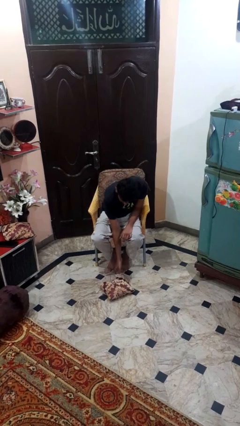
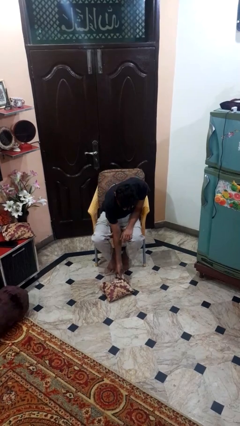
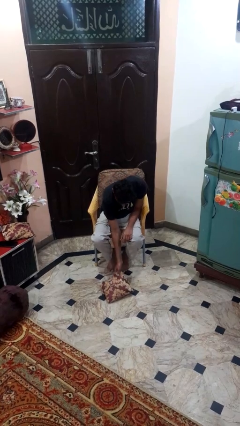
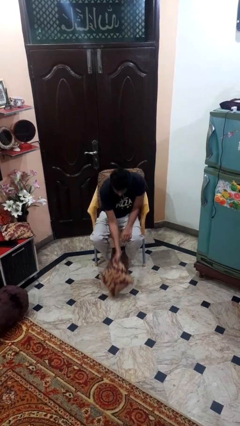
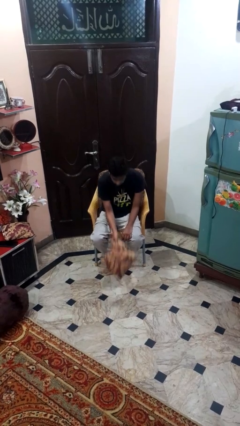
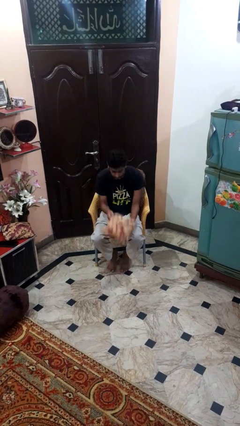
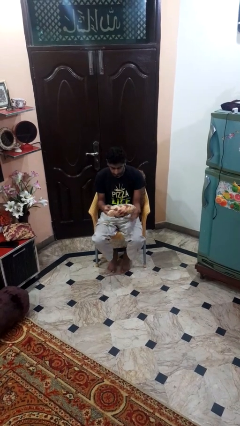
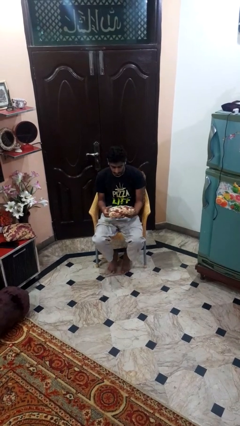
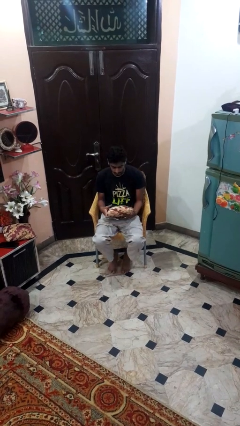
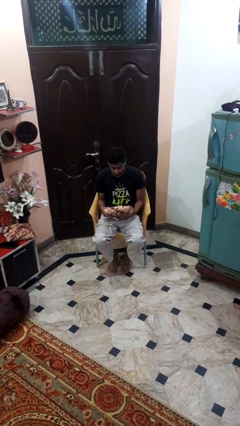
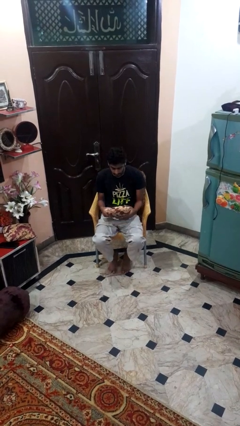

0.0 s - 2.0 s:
person picks up object from floor

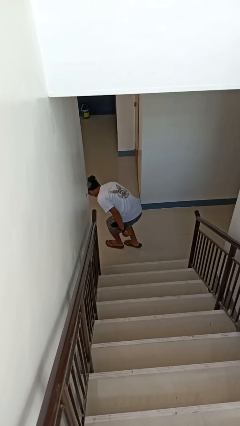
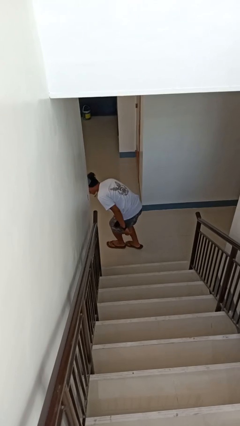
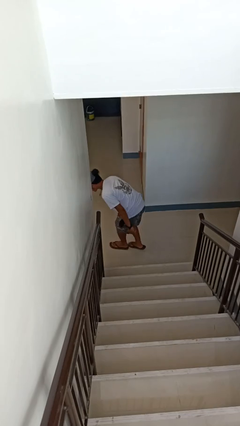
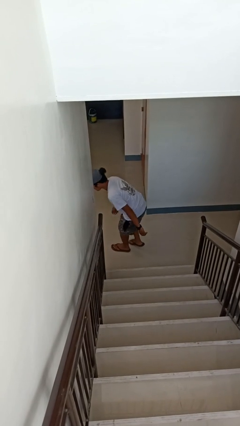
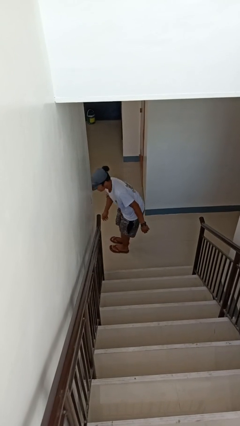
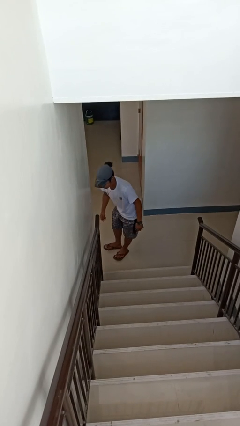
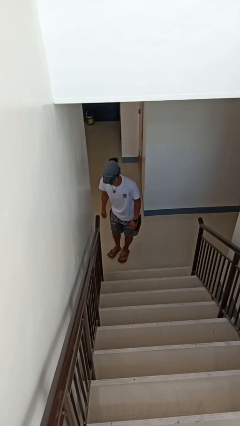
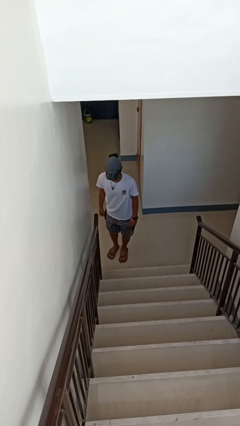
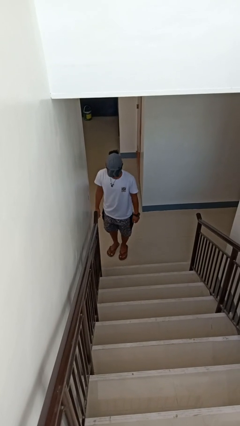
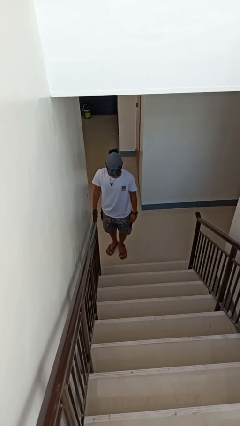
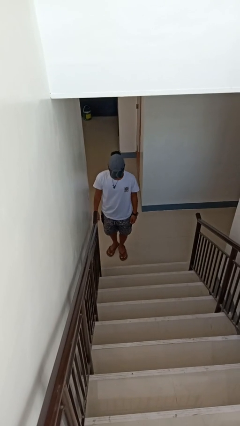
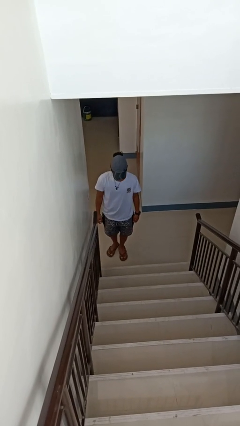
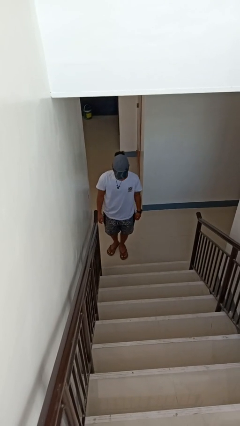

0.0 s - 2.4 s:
person trips on stair

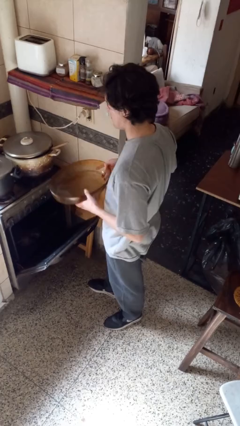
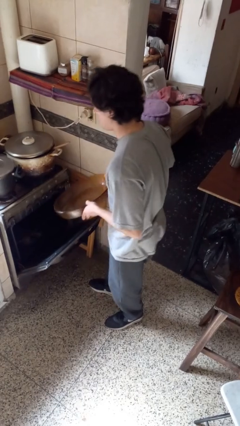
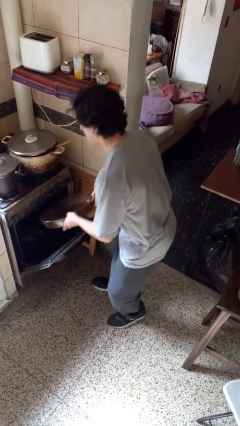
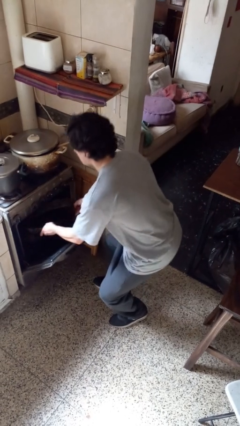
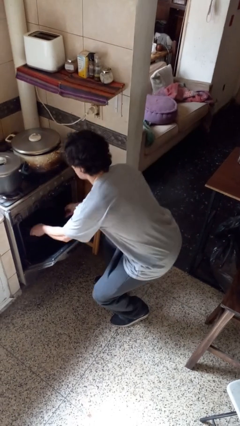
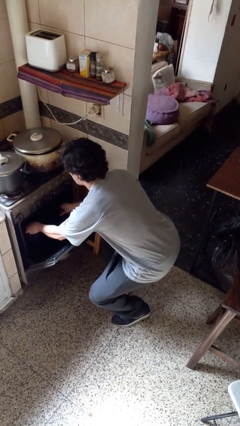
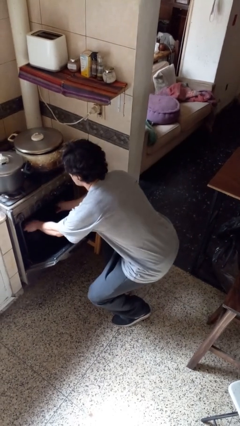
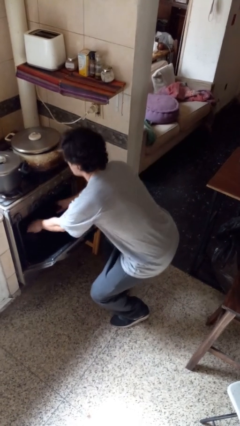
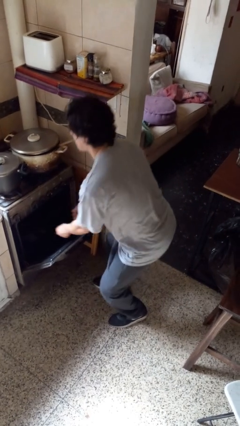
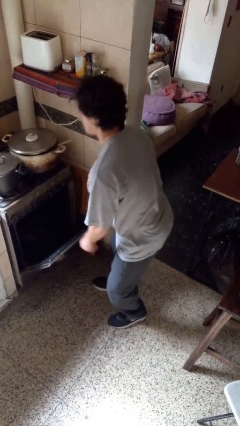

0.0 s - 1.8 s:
person puts object into oven

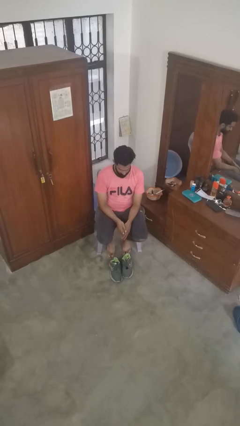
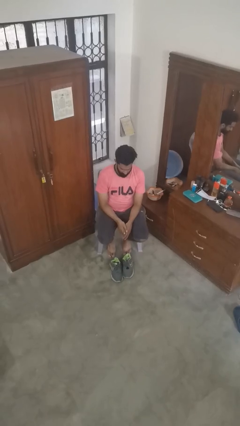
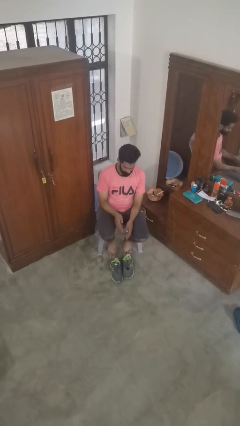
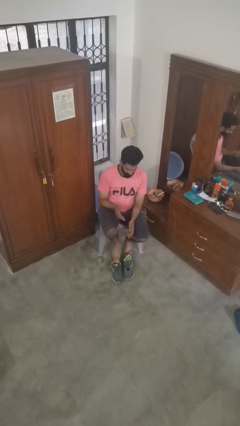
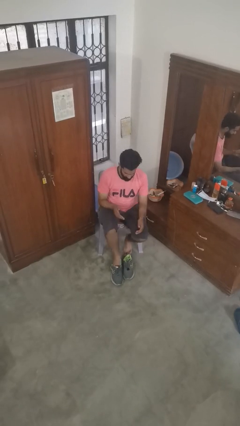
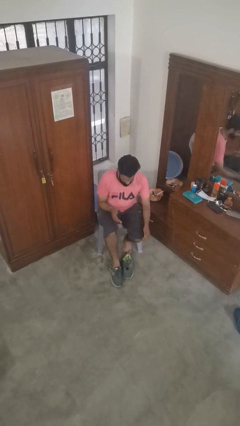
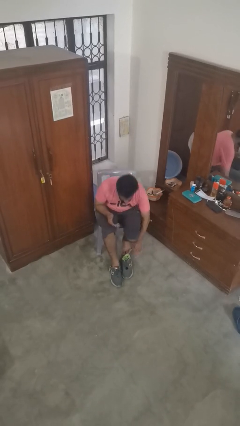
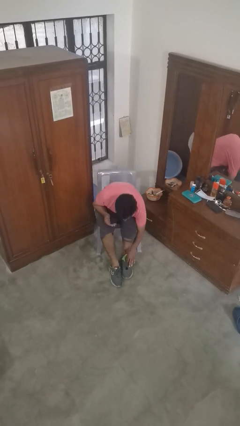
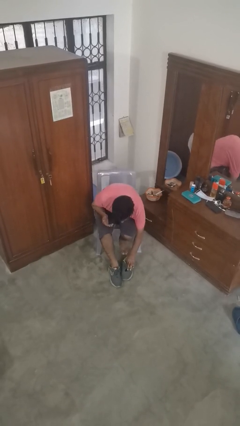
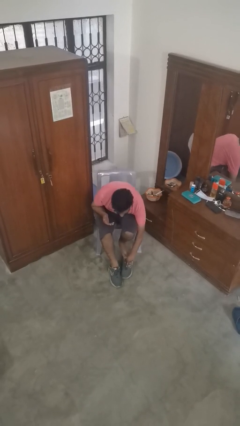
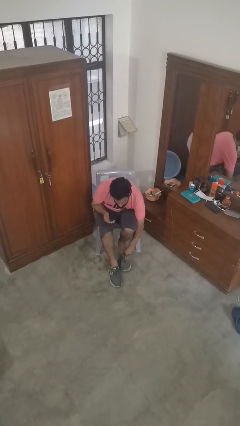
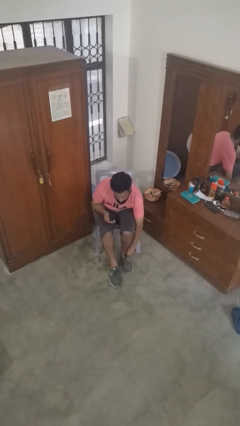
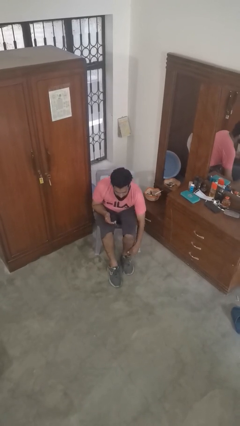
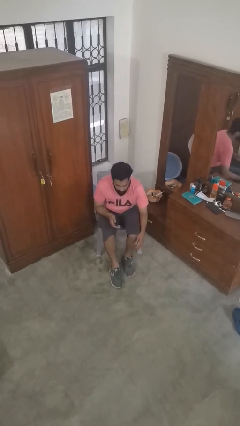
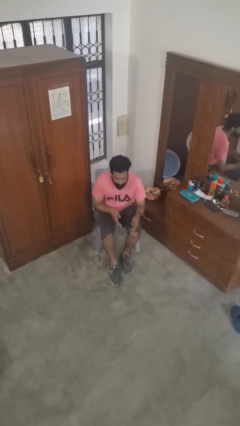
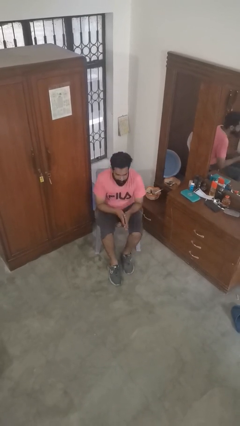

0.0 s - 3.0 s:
person puts on shoes

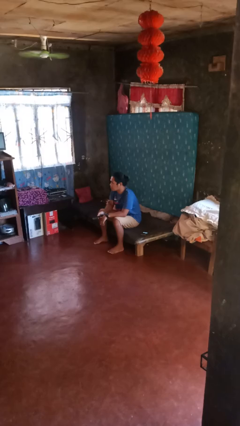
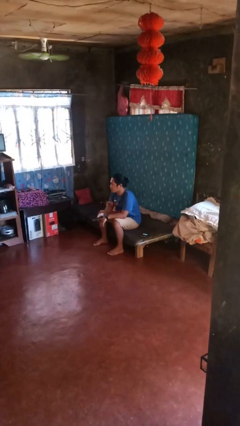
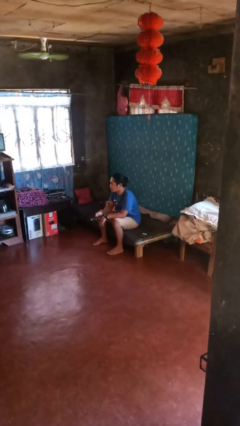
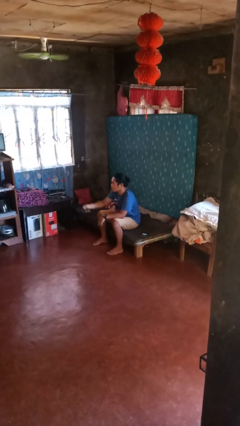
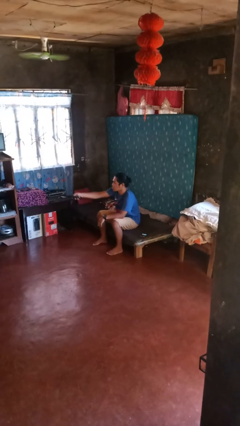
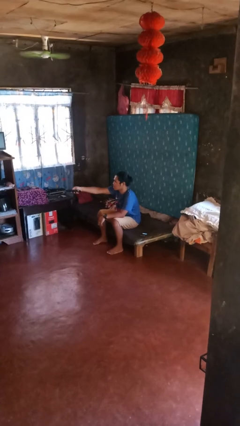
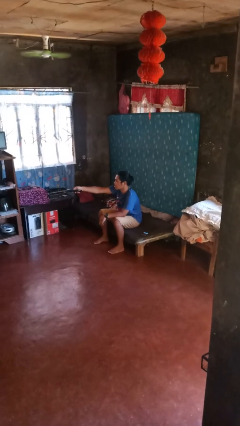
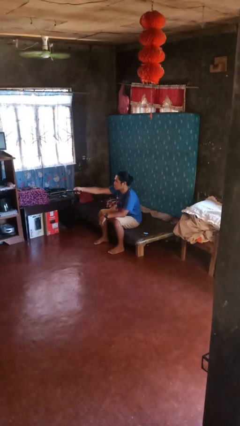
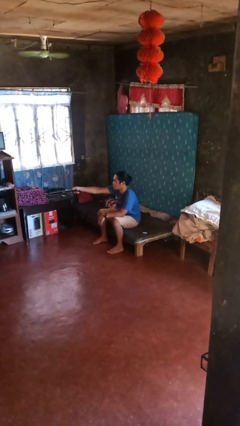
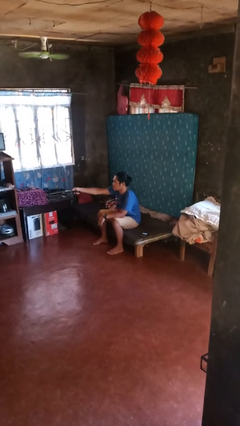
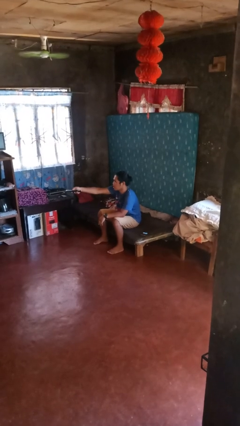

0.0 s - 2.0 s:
person uses television remote

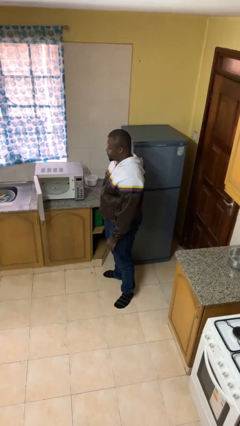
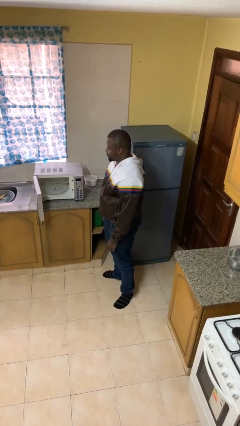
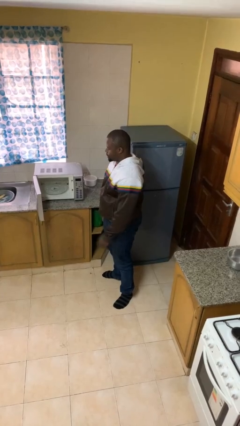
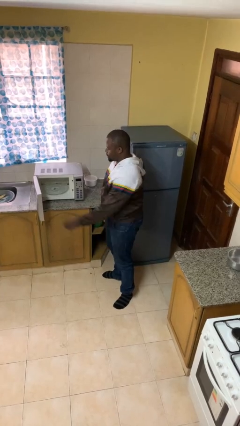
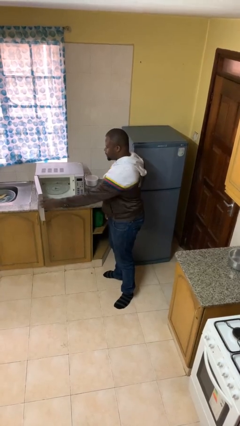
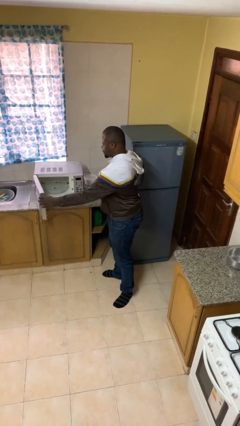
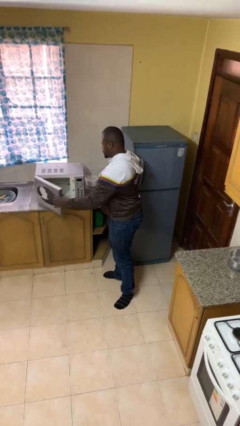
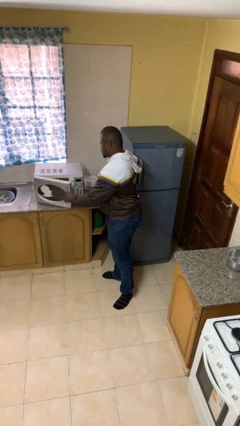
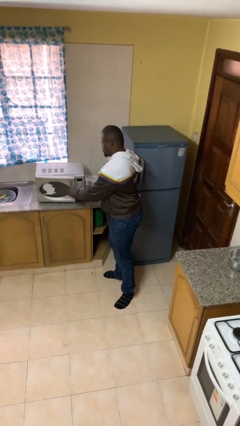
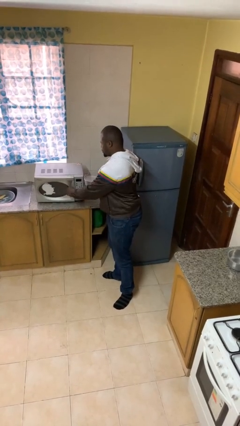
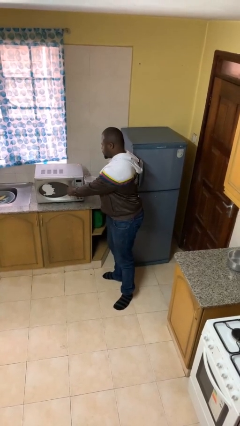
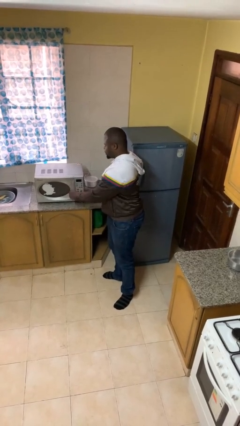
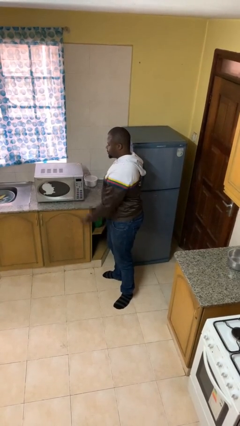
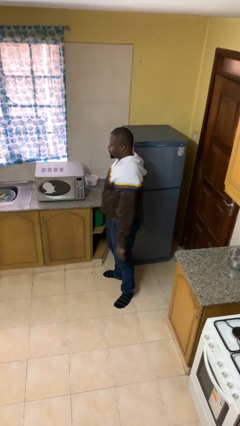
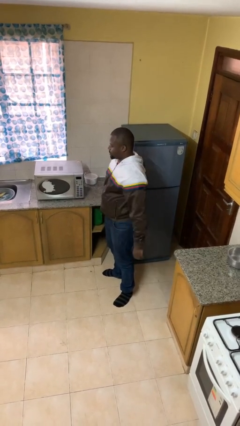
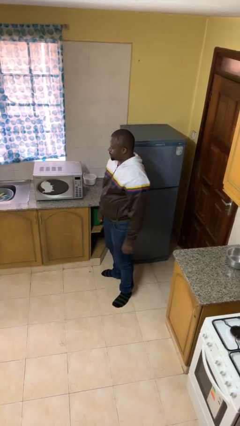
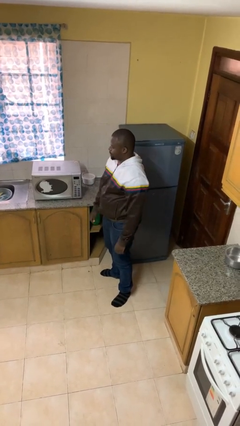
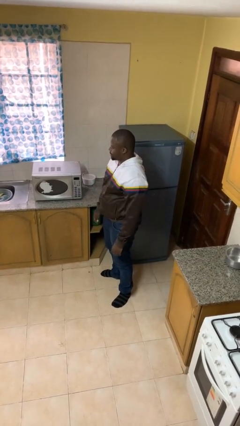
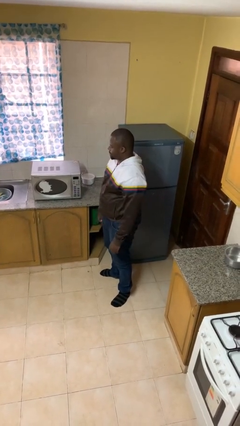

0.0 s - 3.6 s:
person closes microwave

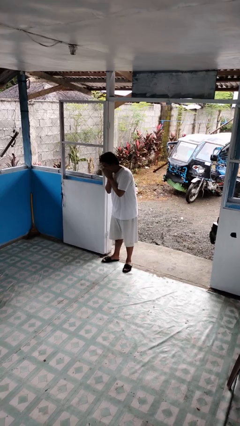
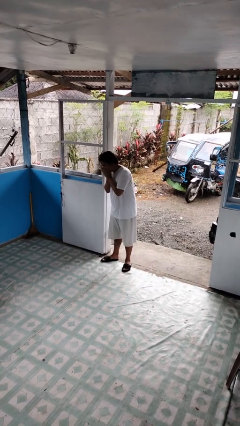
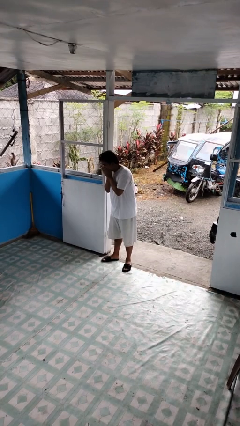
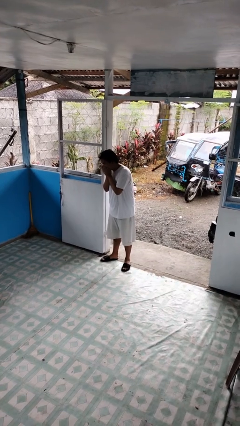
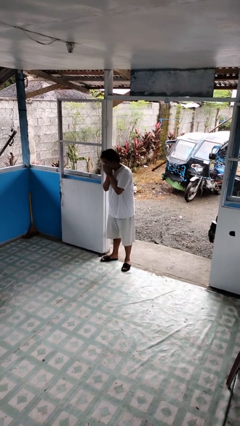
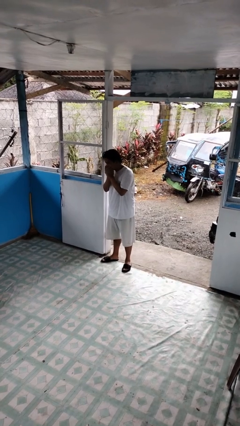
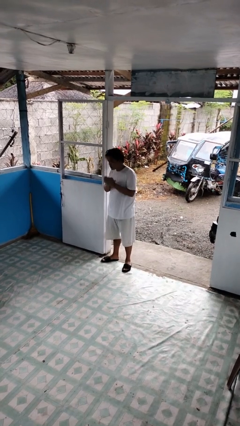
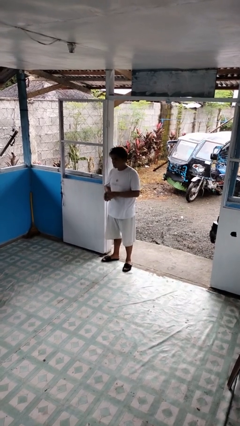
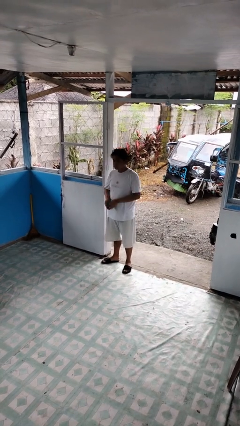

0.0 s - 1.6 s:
person blows nose

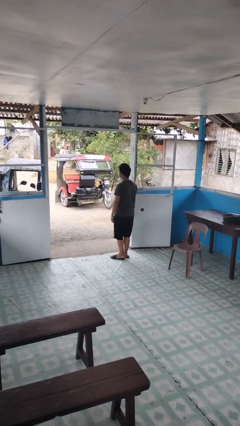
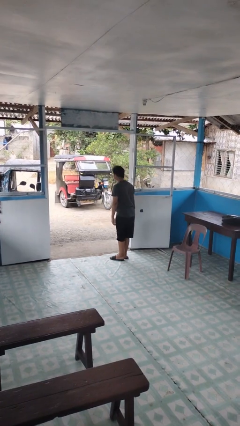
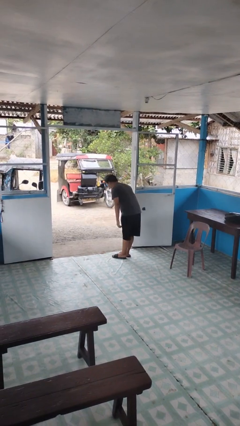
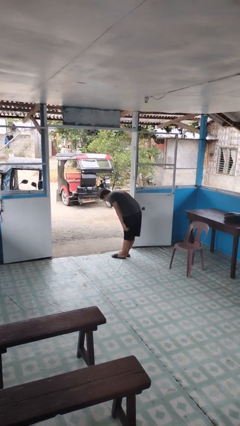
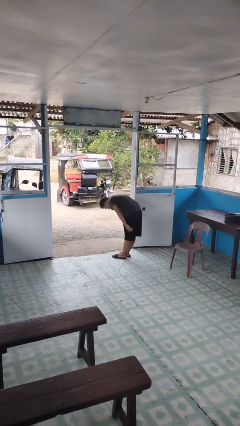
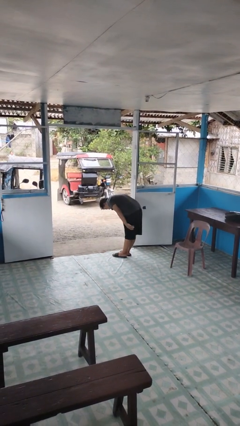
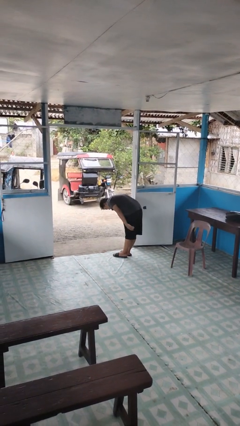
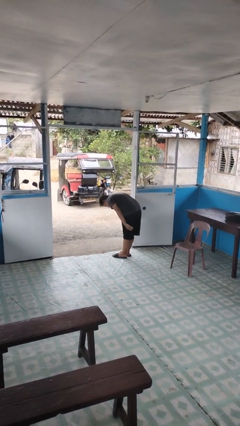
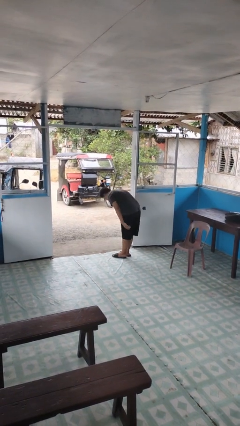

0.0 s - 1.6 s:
person bows
